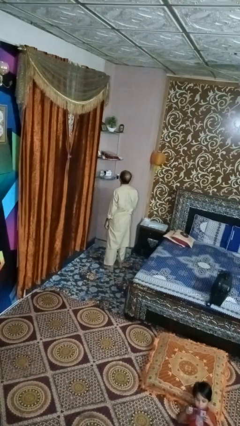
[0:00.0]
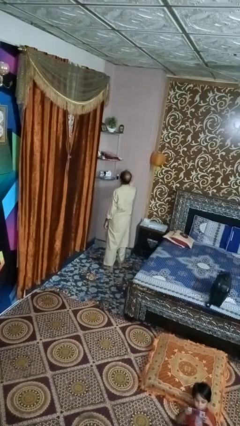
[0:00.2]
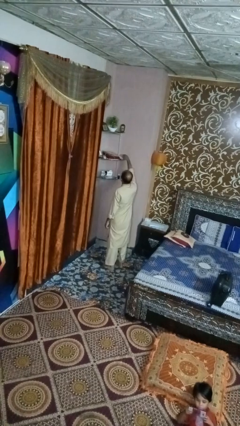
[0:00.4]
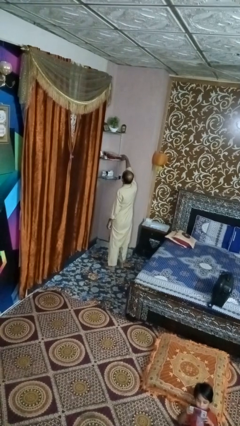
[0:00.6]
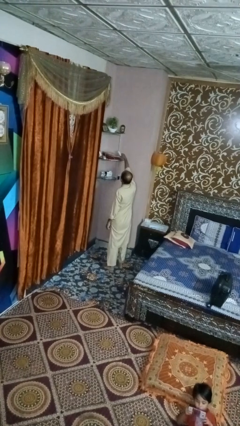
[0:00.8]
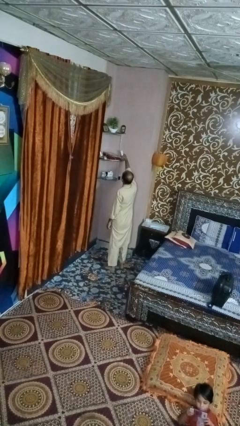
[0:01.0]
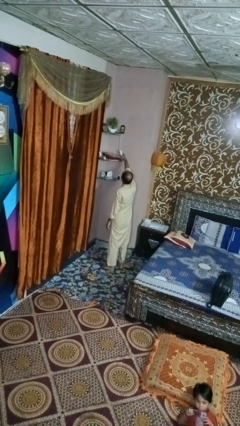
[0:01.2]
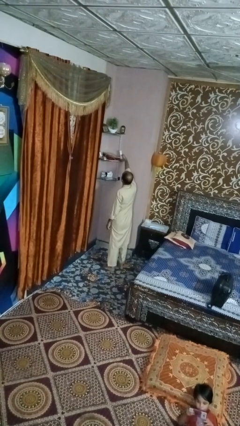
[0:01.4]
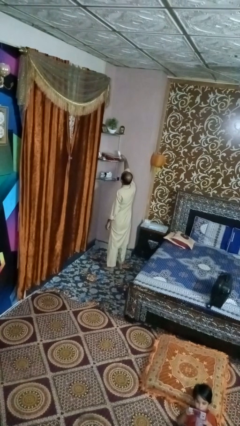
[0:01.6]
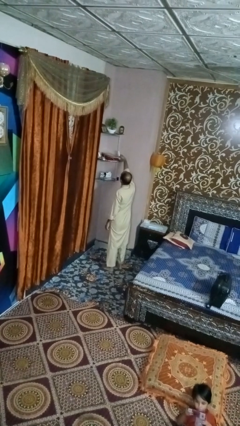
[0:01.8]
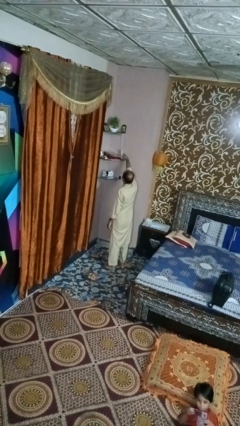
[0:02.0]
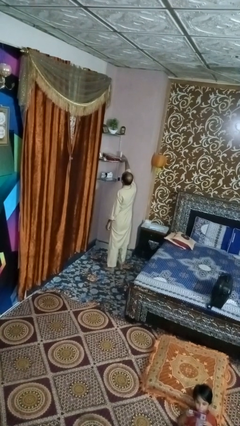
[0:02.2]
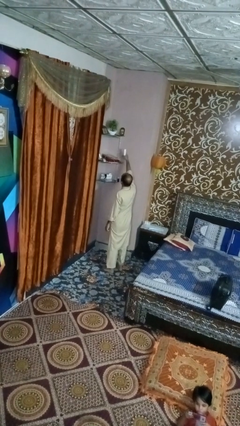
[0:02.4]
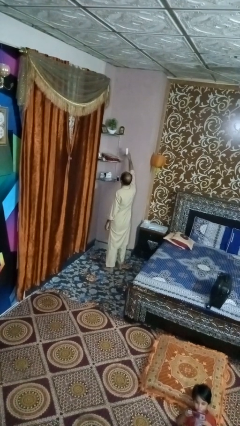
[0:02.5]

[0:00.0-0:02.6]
person picks up object from shelf

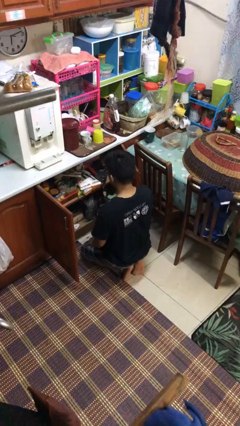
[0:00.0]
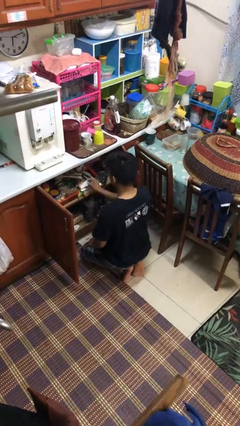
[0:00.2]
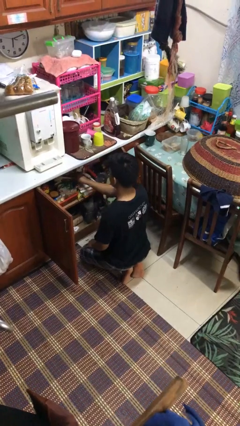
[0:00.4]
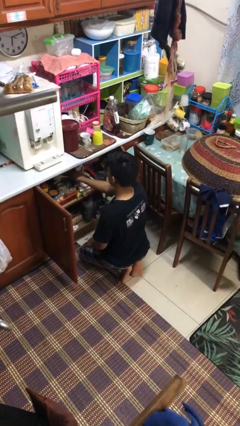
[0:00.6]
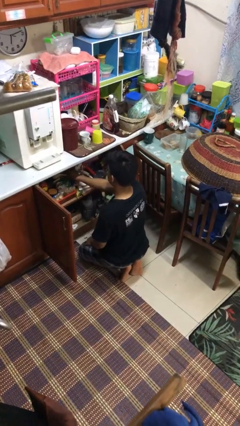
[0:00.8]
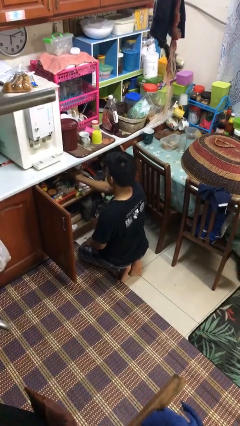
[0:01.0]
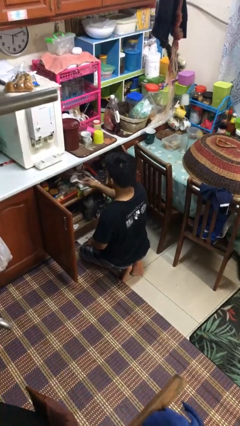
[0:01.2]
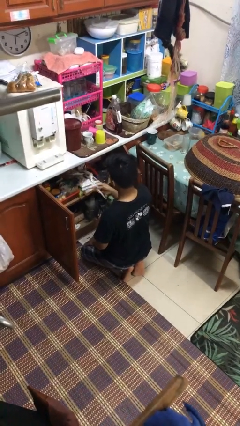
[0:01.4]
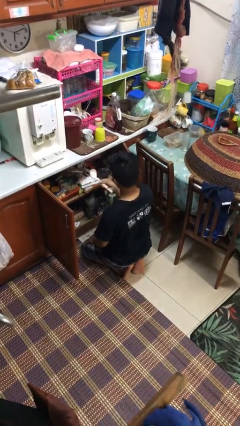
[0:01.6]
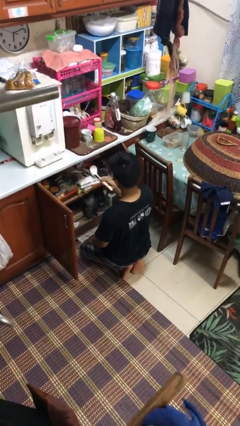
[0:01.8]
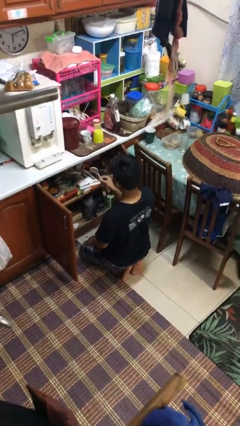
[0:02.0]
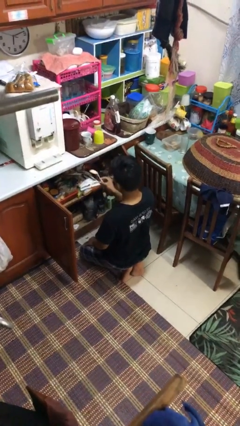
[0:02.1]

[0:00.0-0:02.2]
person takes object from kitchen drawer

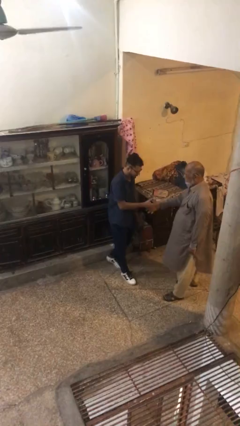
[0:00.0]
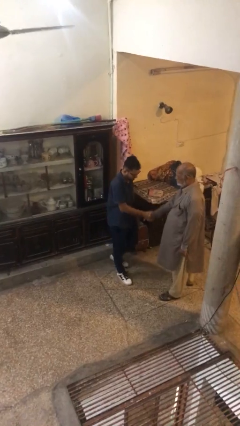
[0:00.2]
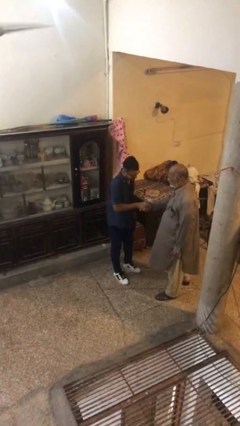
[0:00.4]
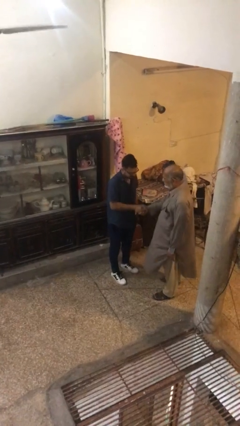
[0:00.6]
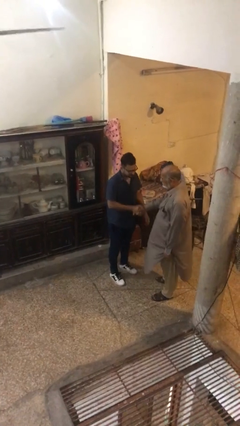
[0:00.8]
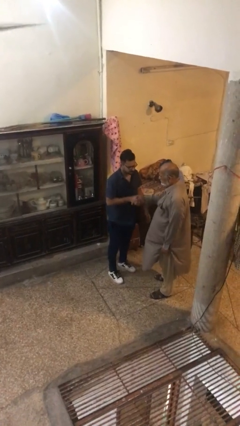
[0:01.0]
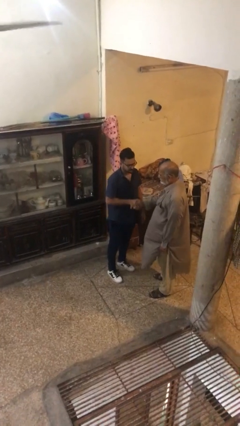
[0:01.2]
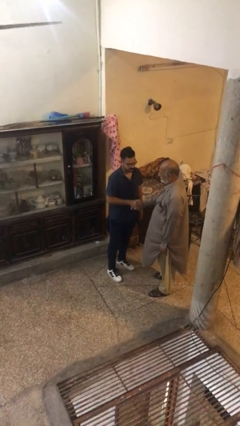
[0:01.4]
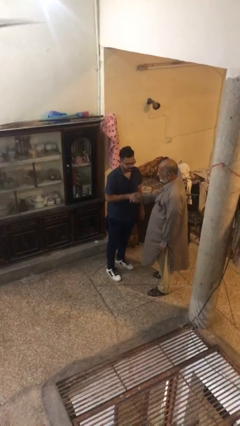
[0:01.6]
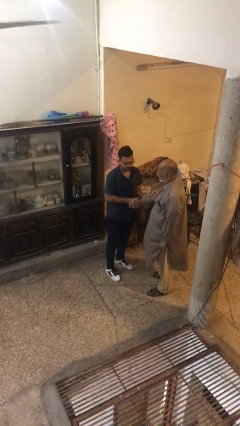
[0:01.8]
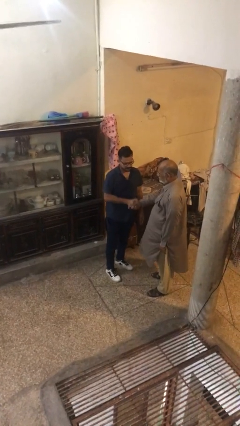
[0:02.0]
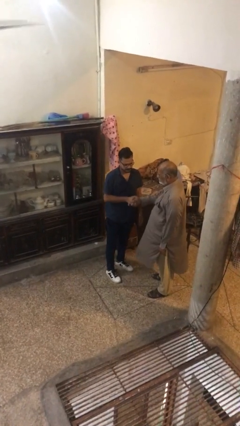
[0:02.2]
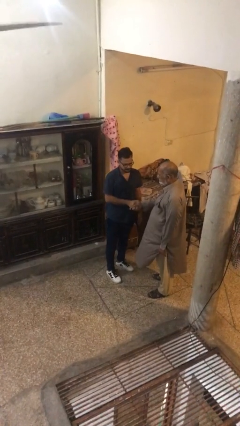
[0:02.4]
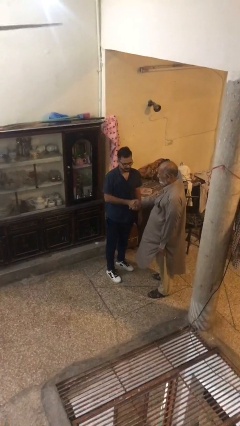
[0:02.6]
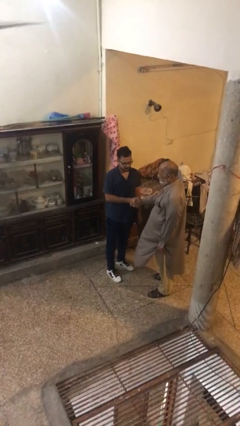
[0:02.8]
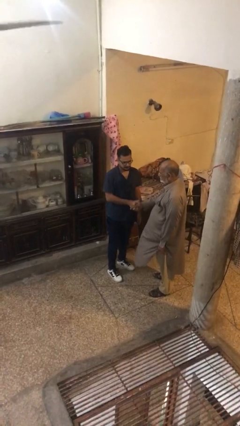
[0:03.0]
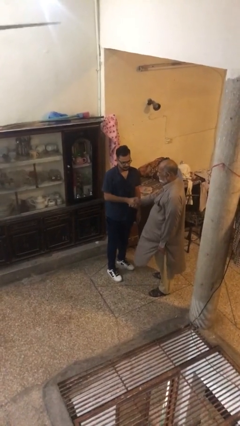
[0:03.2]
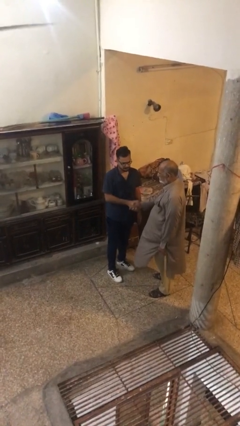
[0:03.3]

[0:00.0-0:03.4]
person shakes hand

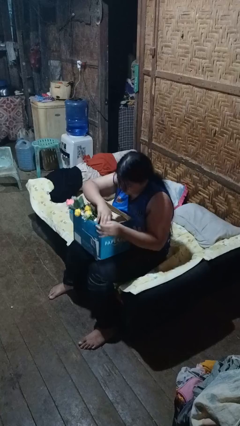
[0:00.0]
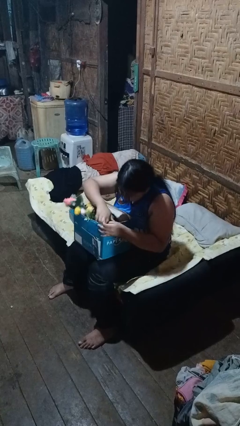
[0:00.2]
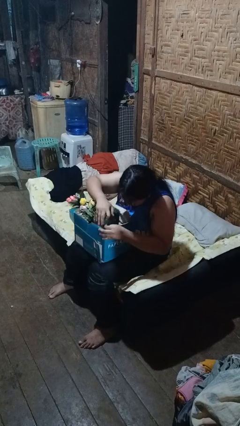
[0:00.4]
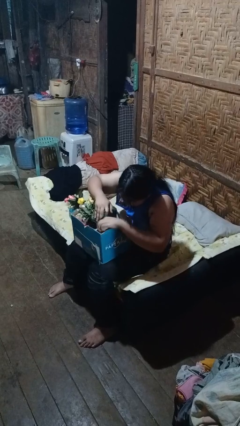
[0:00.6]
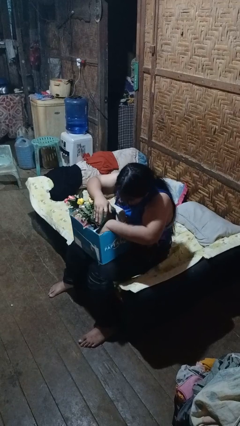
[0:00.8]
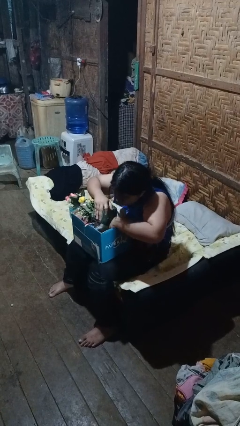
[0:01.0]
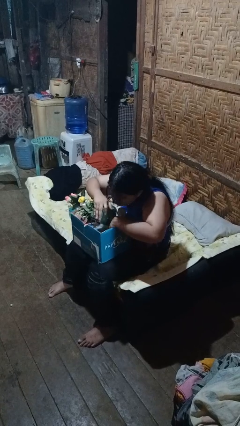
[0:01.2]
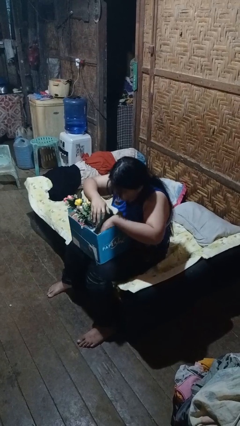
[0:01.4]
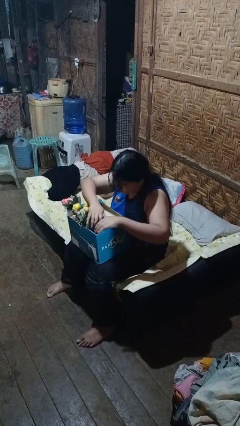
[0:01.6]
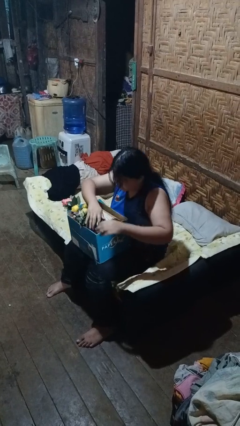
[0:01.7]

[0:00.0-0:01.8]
person searches in box

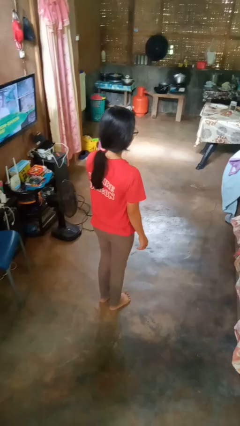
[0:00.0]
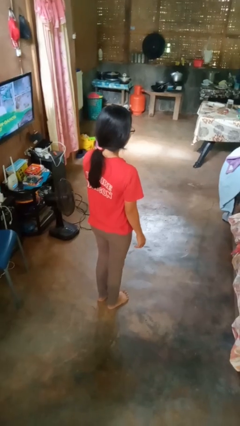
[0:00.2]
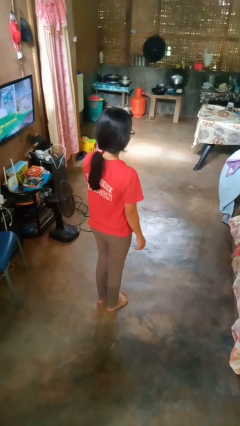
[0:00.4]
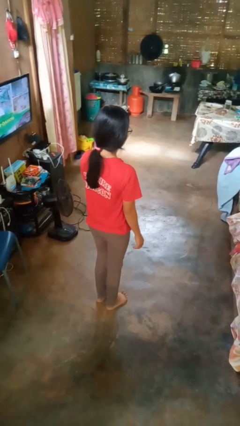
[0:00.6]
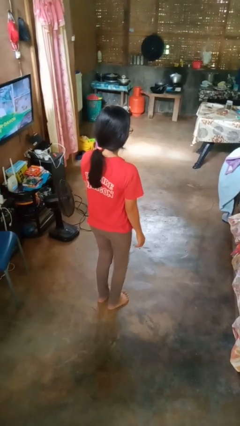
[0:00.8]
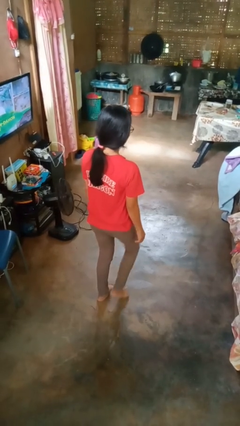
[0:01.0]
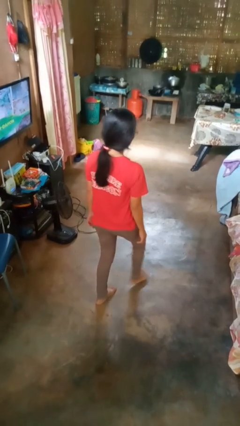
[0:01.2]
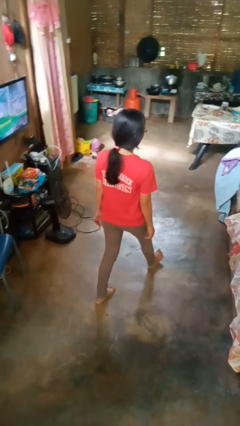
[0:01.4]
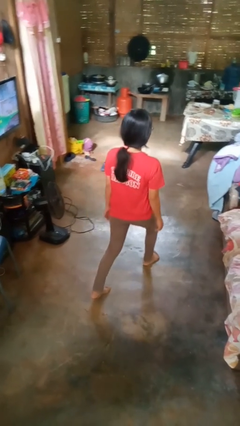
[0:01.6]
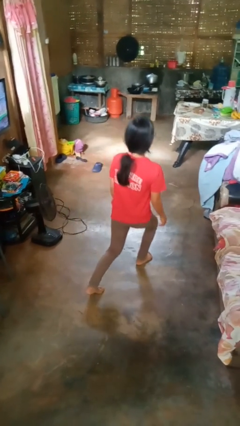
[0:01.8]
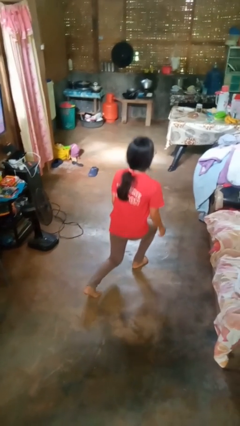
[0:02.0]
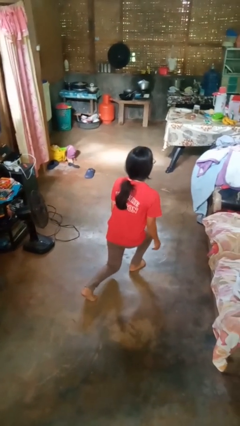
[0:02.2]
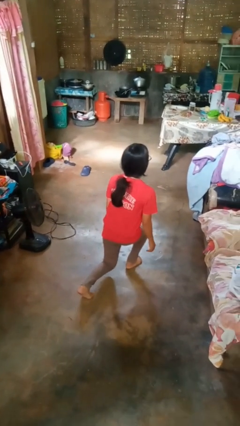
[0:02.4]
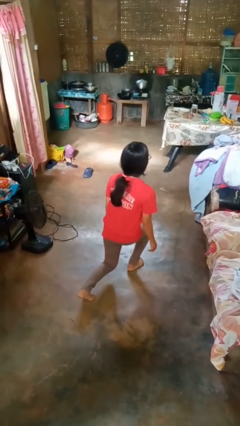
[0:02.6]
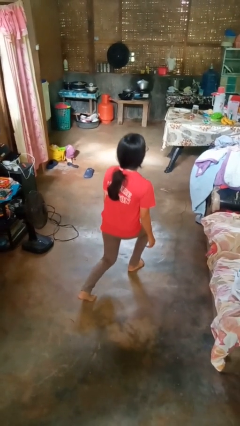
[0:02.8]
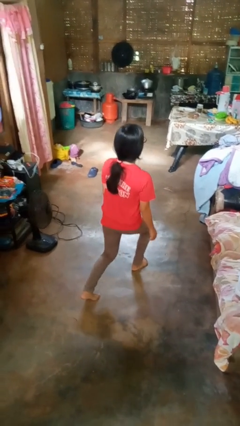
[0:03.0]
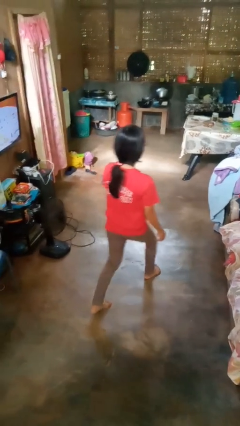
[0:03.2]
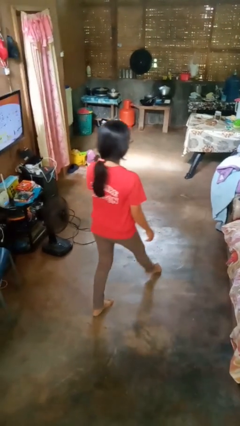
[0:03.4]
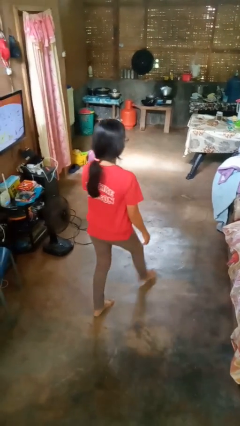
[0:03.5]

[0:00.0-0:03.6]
person exercises with lunges

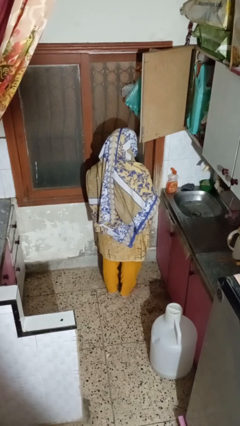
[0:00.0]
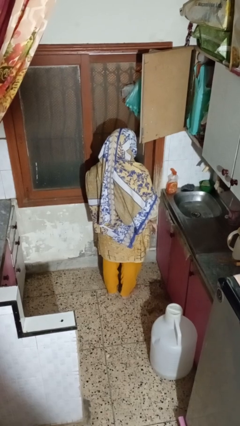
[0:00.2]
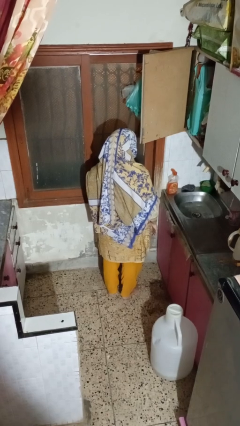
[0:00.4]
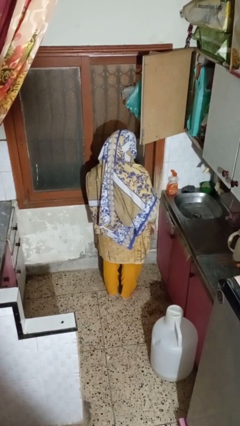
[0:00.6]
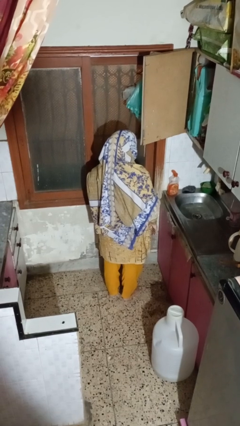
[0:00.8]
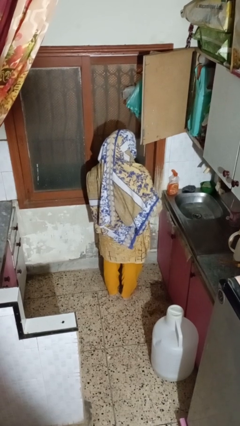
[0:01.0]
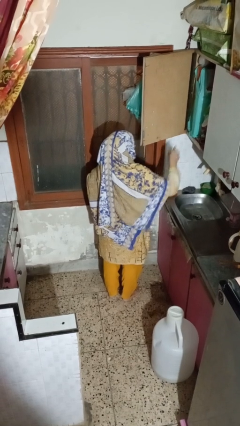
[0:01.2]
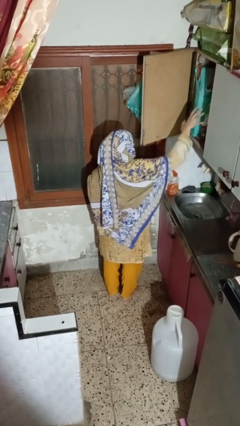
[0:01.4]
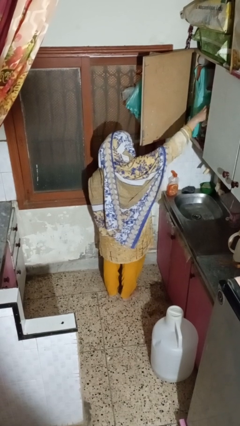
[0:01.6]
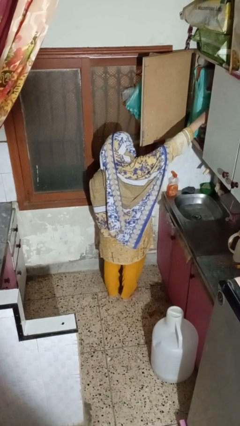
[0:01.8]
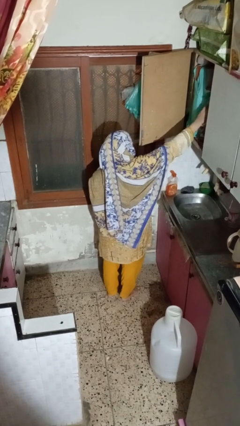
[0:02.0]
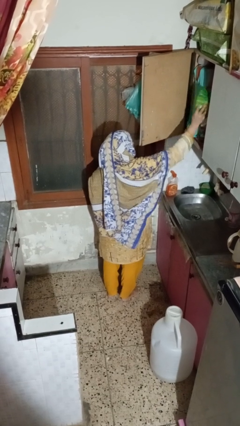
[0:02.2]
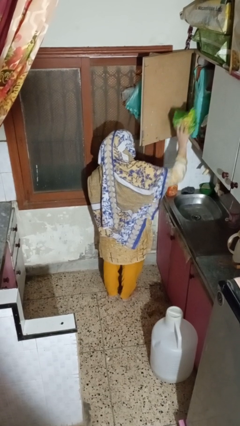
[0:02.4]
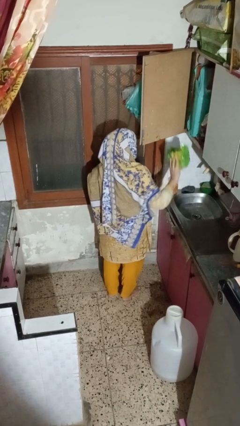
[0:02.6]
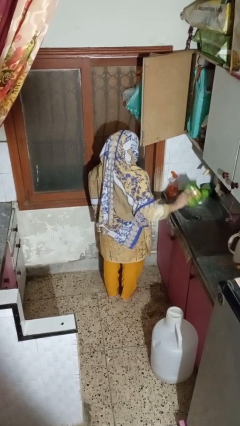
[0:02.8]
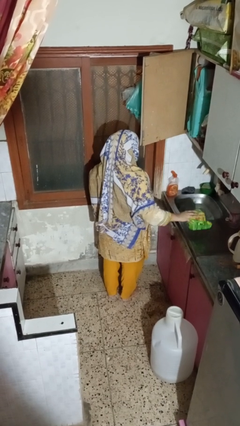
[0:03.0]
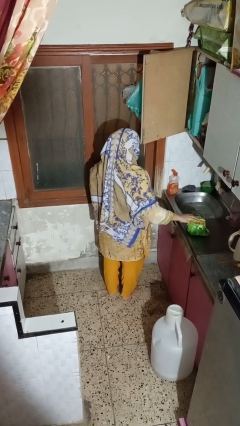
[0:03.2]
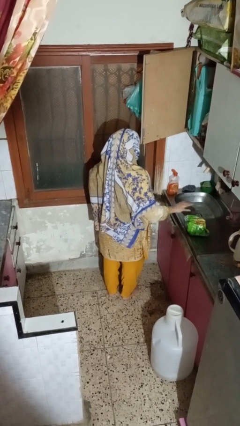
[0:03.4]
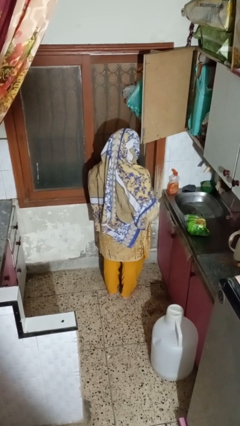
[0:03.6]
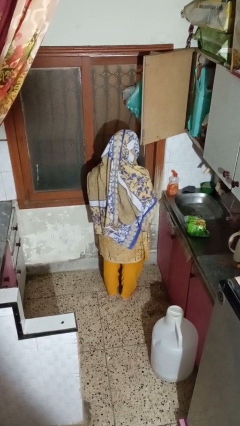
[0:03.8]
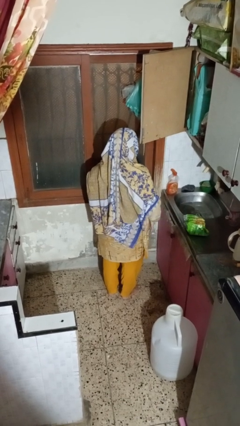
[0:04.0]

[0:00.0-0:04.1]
person takes object from cabinet
